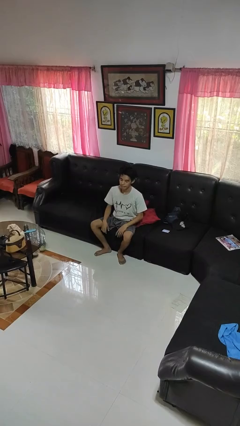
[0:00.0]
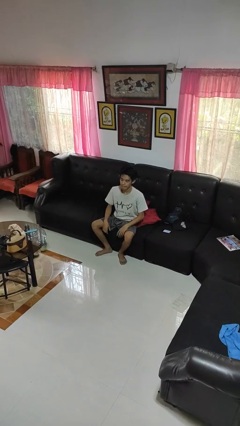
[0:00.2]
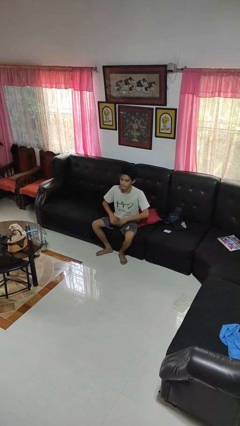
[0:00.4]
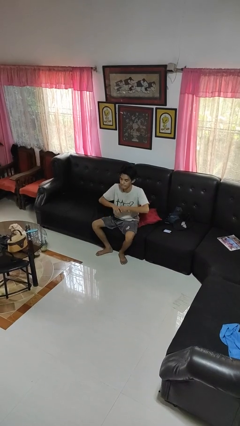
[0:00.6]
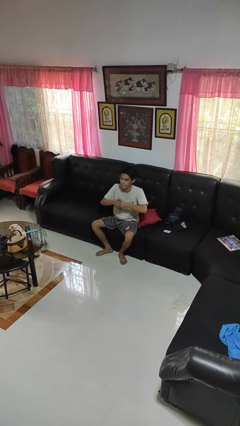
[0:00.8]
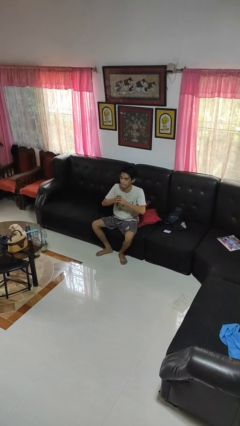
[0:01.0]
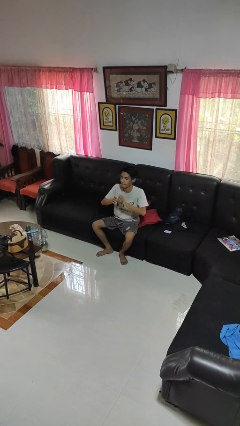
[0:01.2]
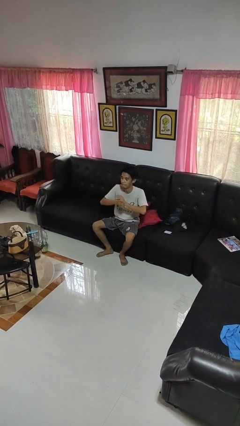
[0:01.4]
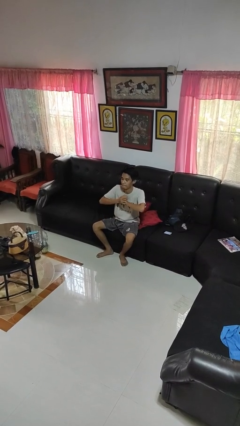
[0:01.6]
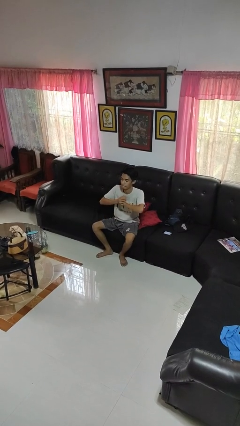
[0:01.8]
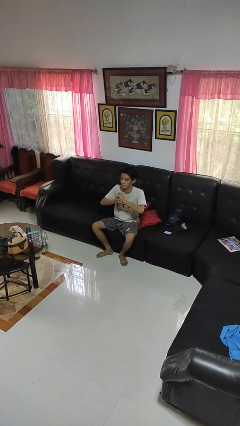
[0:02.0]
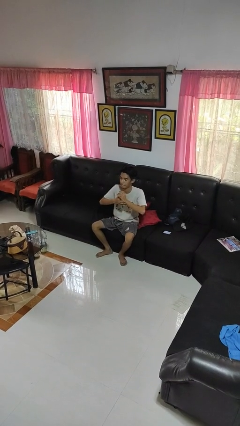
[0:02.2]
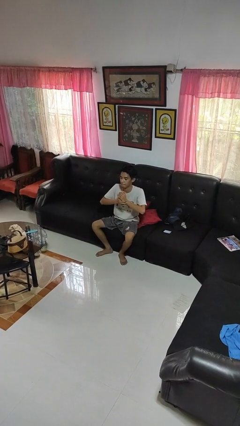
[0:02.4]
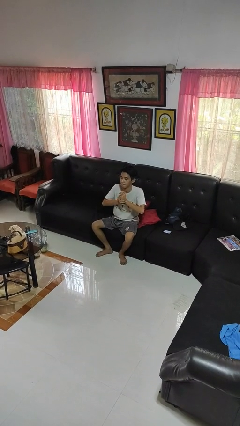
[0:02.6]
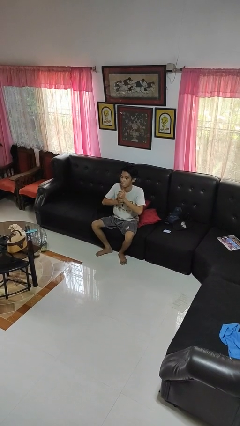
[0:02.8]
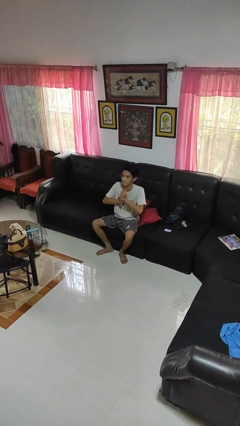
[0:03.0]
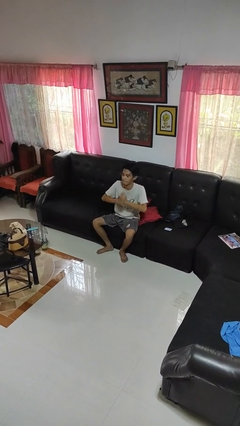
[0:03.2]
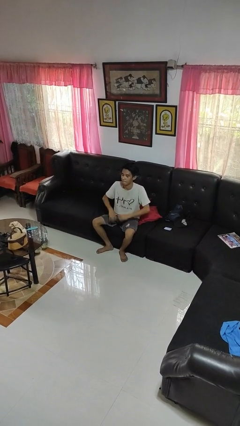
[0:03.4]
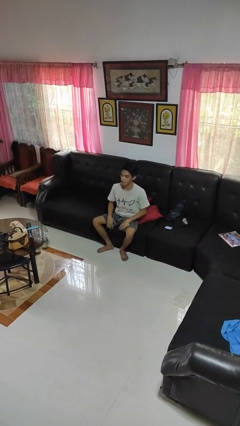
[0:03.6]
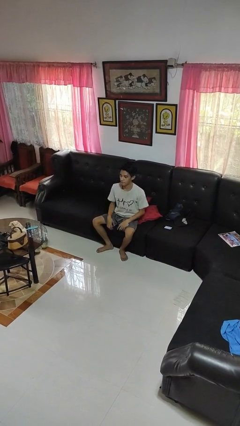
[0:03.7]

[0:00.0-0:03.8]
person cracks knuckles

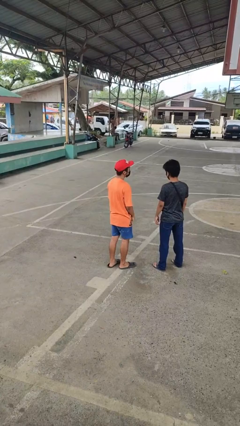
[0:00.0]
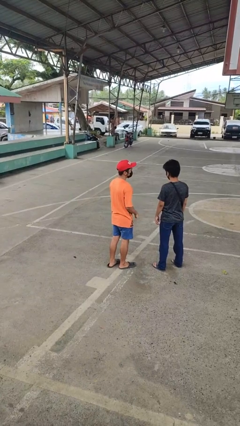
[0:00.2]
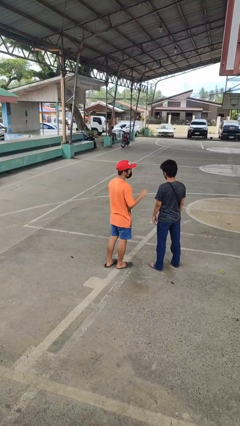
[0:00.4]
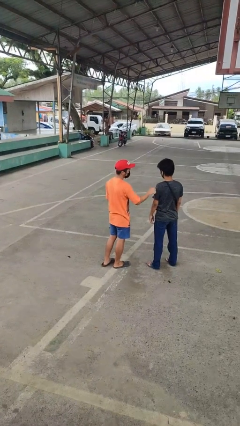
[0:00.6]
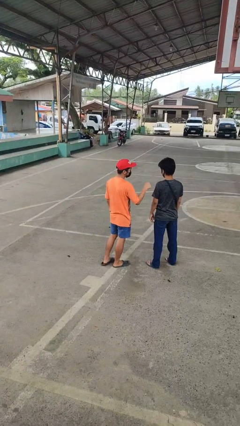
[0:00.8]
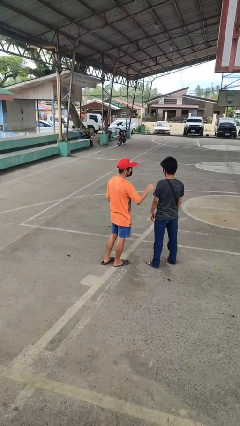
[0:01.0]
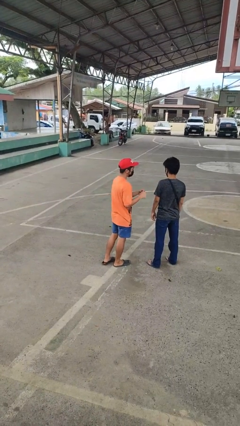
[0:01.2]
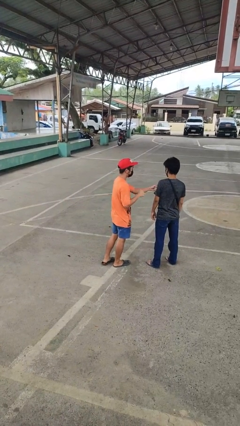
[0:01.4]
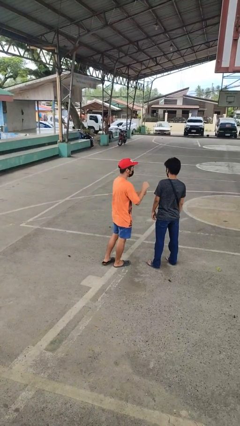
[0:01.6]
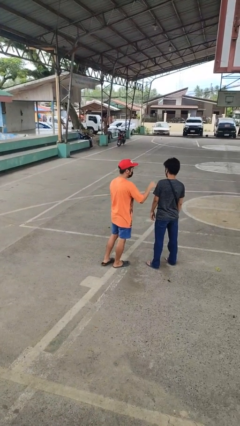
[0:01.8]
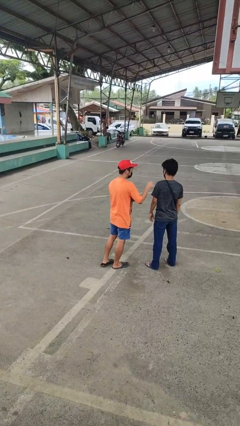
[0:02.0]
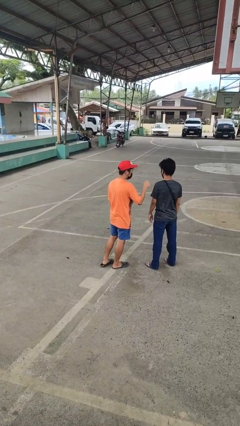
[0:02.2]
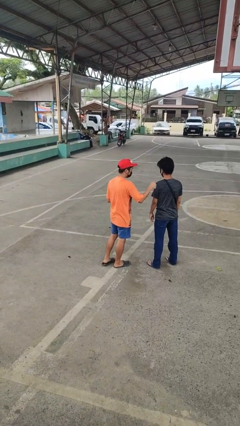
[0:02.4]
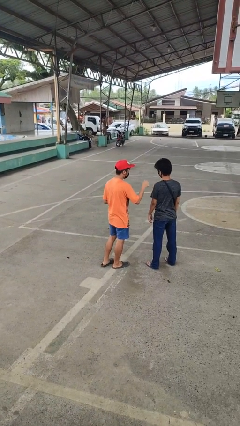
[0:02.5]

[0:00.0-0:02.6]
person pounds shoulders of person

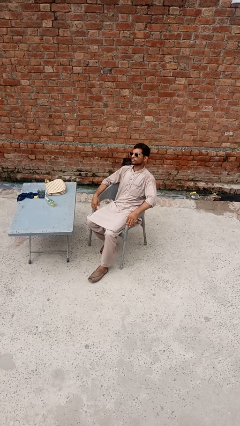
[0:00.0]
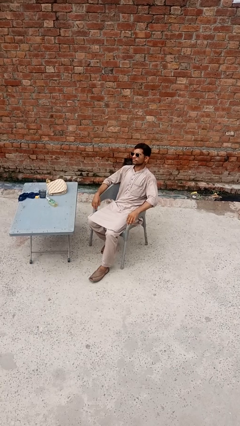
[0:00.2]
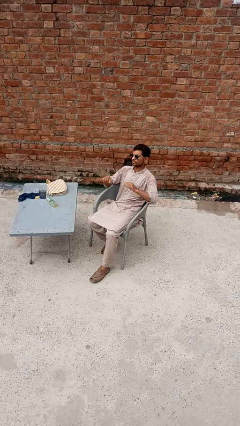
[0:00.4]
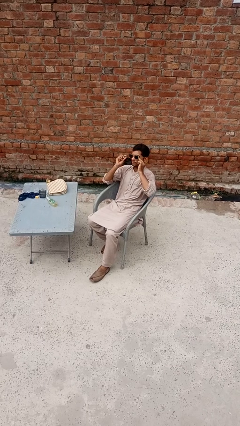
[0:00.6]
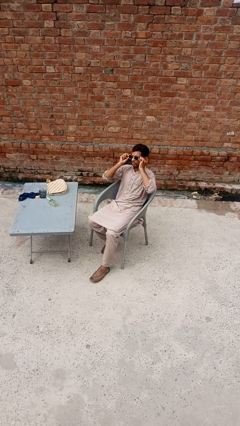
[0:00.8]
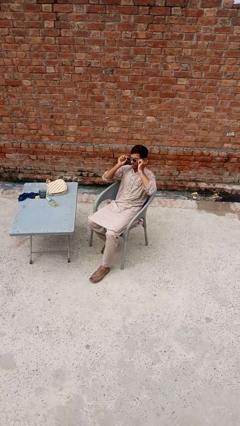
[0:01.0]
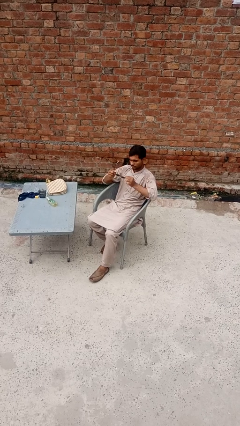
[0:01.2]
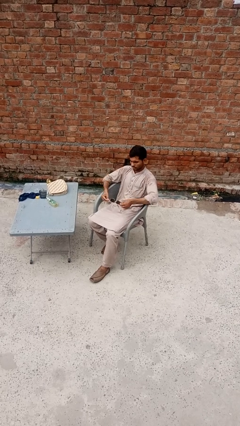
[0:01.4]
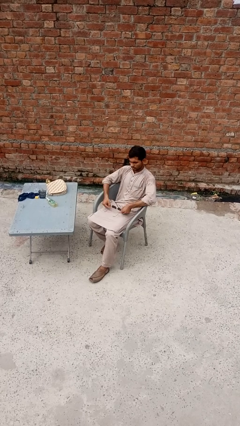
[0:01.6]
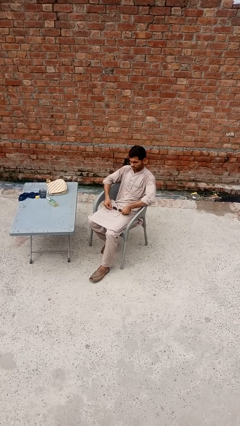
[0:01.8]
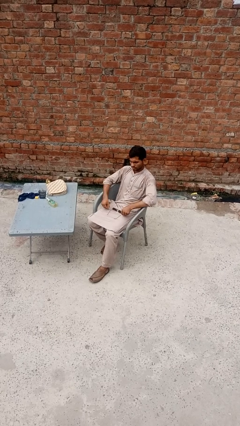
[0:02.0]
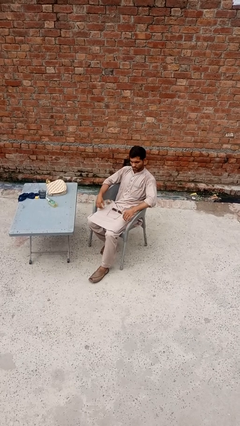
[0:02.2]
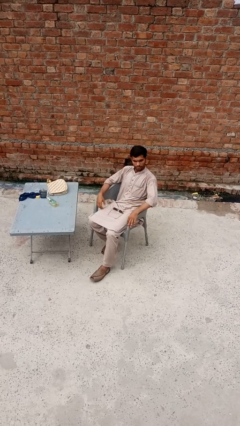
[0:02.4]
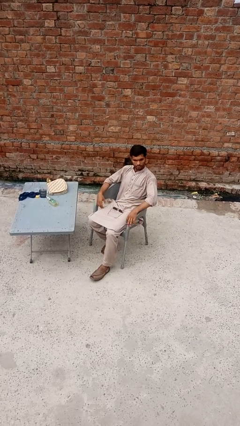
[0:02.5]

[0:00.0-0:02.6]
person takes off sunglasses

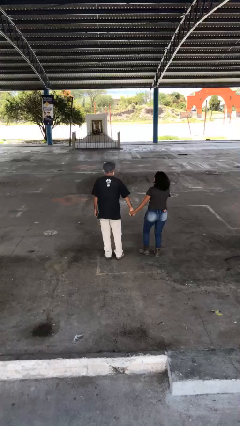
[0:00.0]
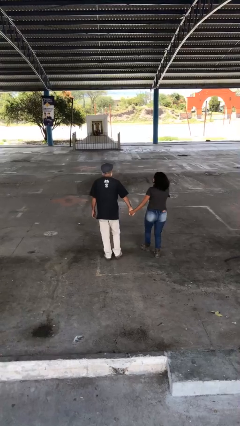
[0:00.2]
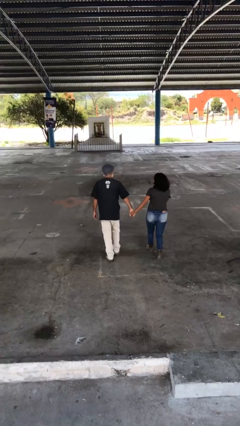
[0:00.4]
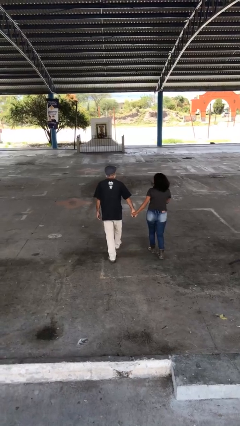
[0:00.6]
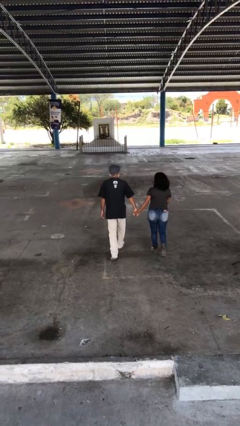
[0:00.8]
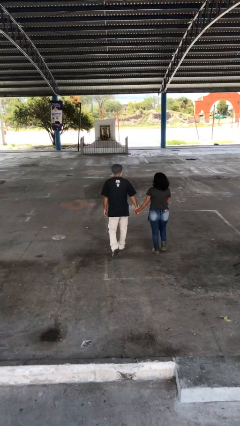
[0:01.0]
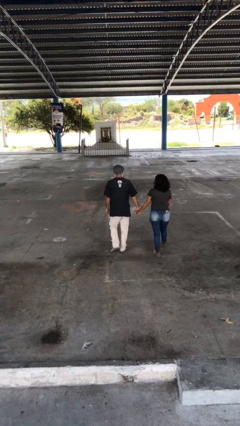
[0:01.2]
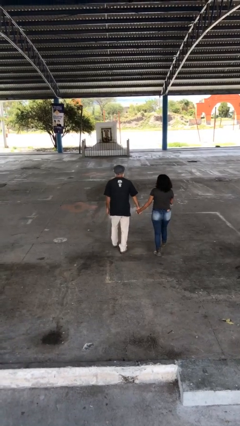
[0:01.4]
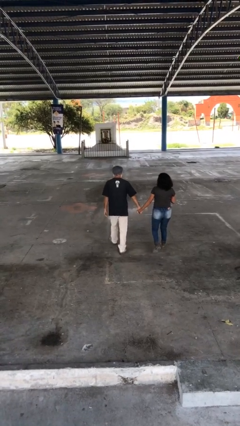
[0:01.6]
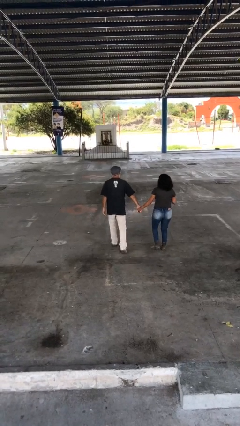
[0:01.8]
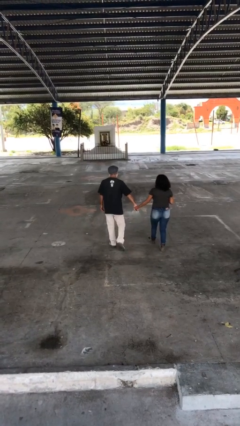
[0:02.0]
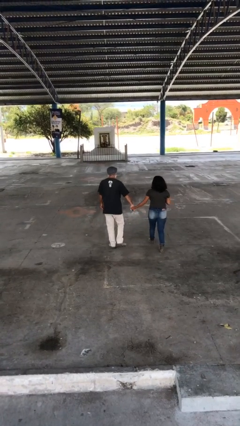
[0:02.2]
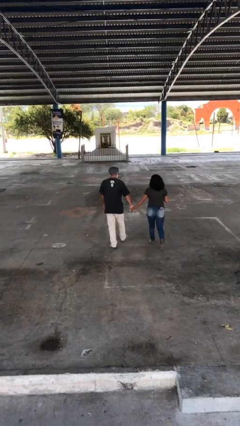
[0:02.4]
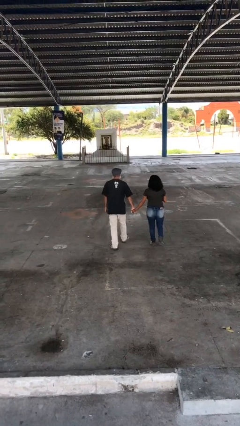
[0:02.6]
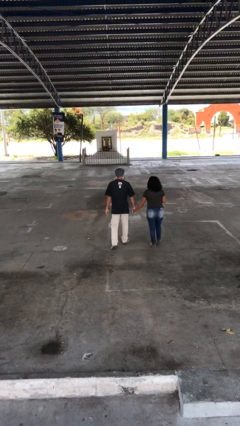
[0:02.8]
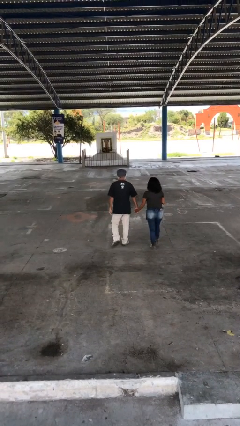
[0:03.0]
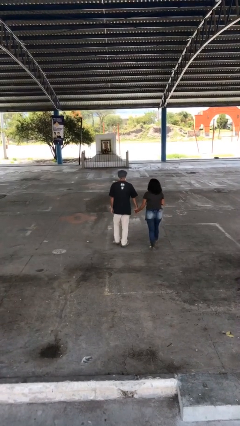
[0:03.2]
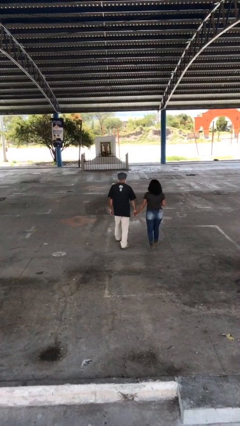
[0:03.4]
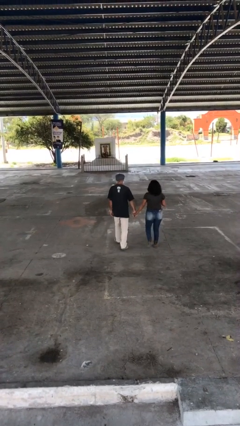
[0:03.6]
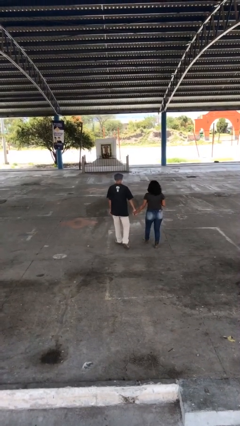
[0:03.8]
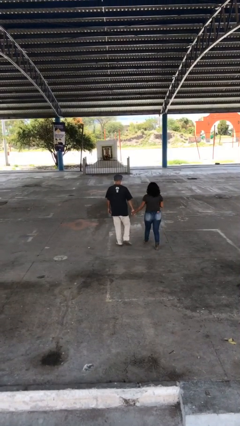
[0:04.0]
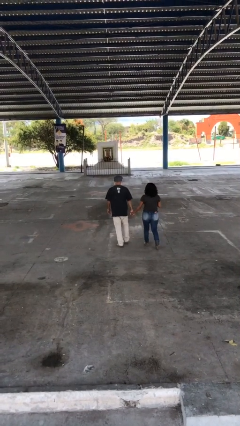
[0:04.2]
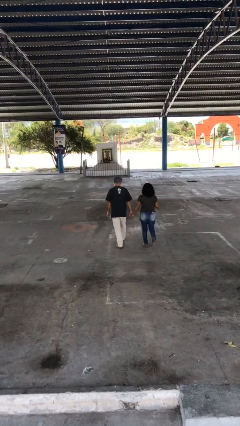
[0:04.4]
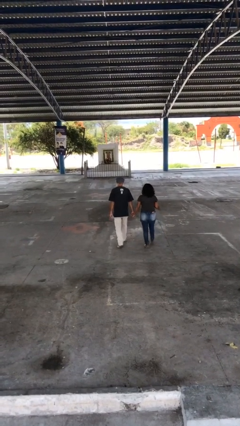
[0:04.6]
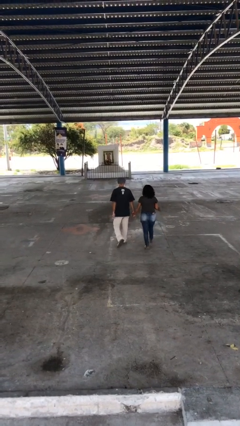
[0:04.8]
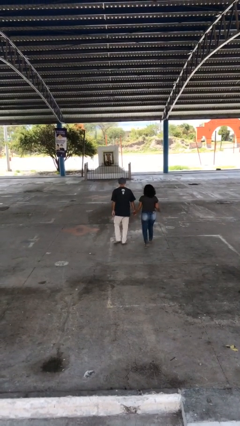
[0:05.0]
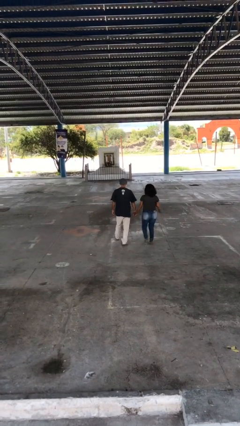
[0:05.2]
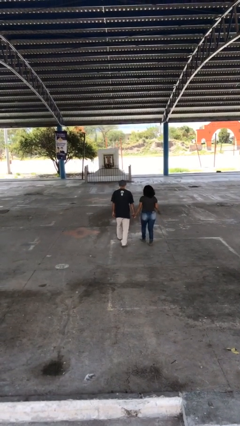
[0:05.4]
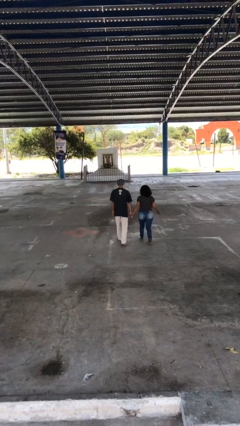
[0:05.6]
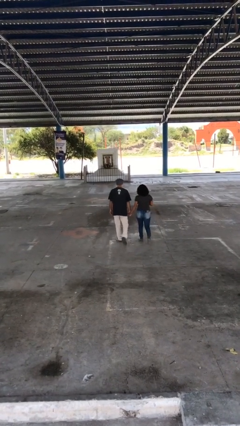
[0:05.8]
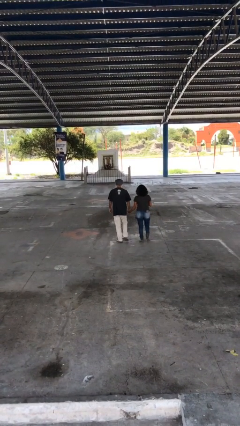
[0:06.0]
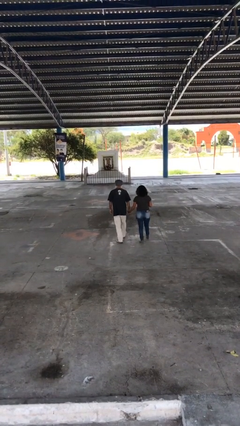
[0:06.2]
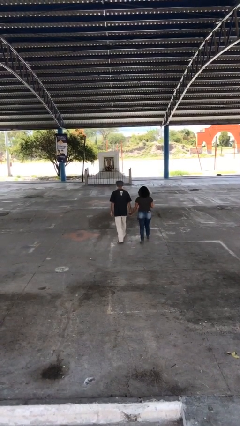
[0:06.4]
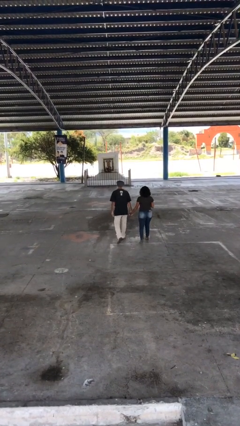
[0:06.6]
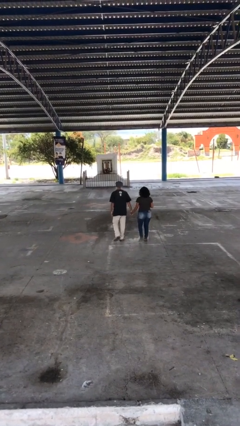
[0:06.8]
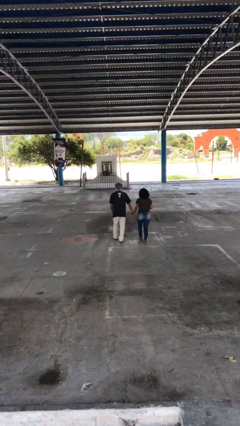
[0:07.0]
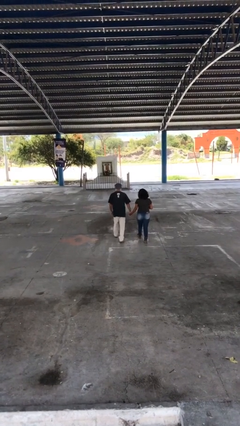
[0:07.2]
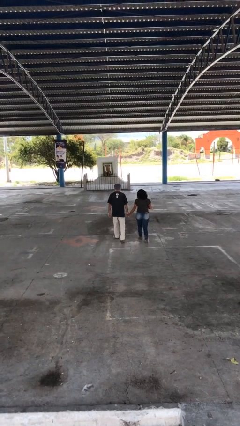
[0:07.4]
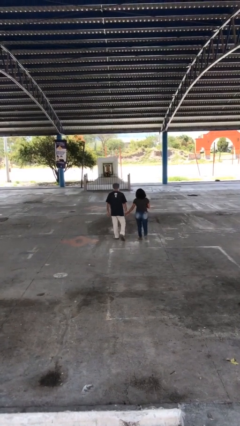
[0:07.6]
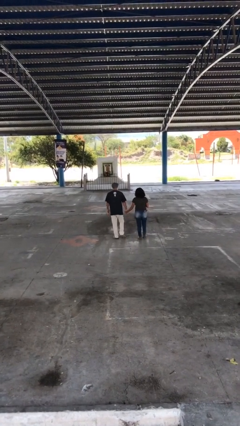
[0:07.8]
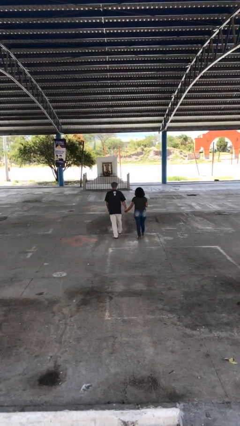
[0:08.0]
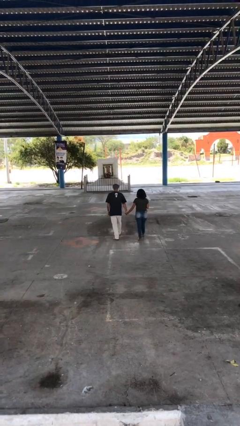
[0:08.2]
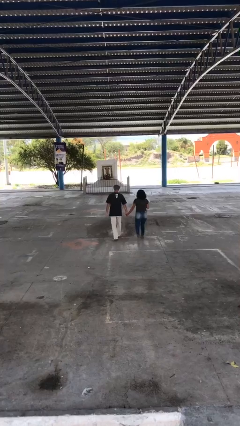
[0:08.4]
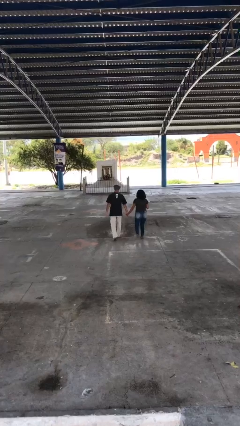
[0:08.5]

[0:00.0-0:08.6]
person holds hand

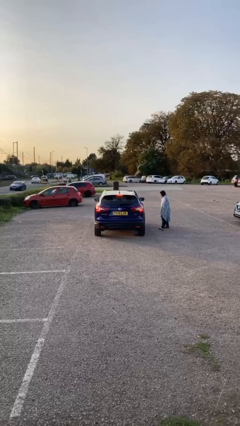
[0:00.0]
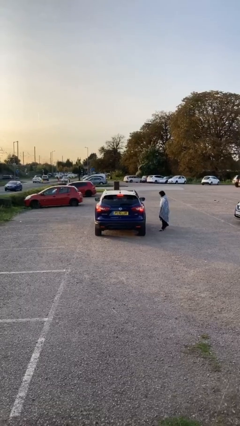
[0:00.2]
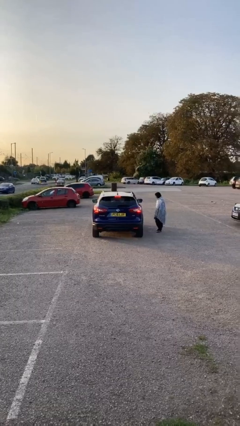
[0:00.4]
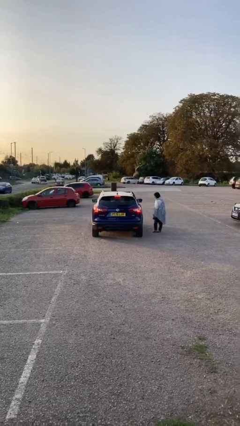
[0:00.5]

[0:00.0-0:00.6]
car picks up person
